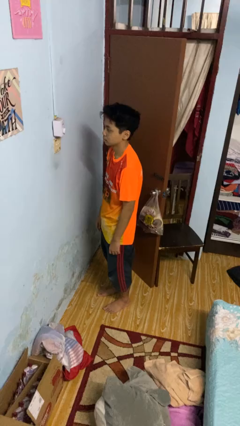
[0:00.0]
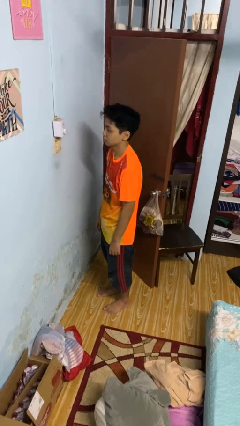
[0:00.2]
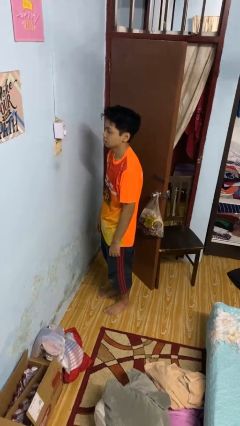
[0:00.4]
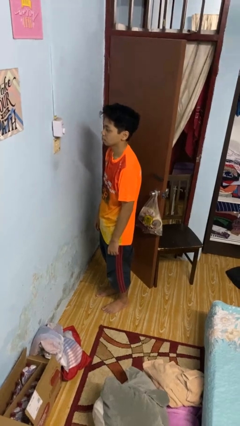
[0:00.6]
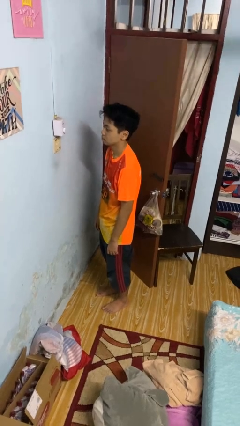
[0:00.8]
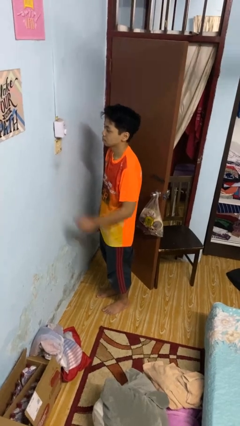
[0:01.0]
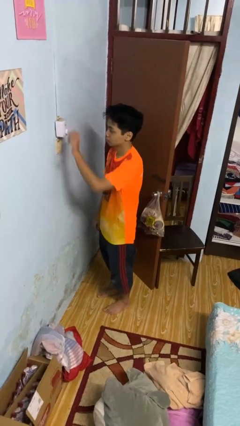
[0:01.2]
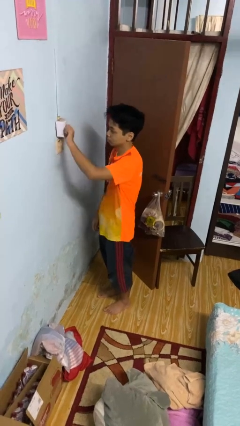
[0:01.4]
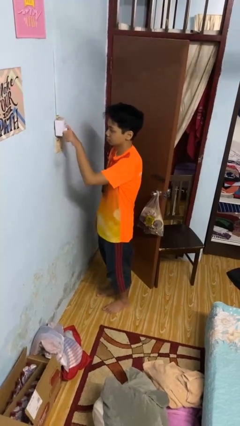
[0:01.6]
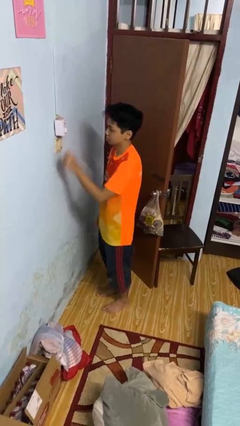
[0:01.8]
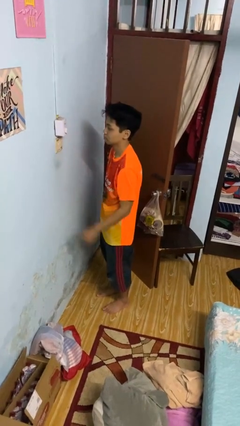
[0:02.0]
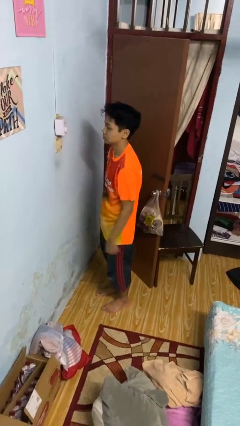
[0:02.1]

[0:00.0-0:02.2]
person adjusts thermostat

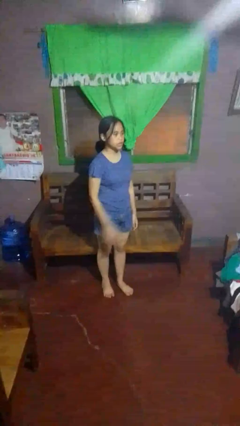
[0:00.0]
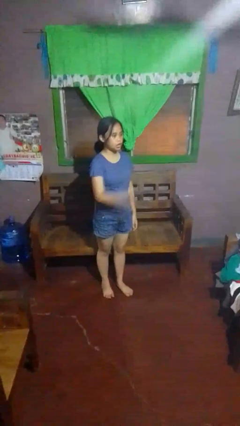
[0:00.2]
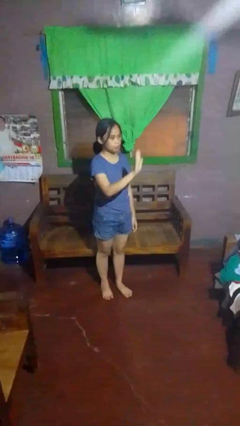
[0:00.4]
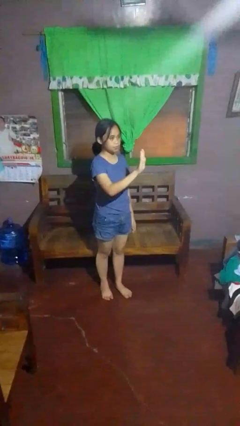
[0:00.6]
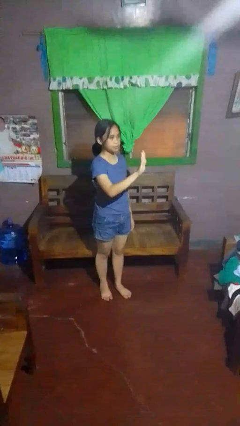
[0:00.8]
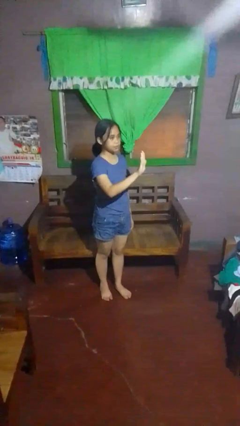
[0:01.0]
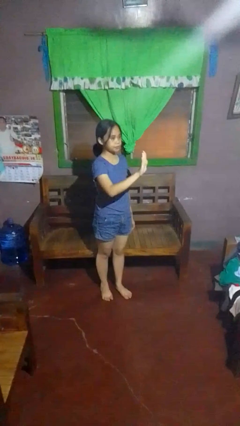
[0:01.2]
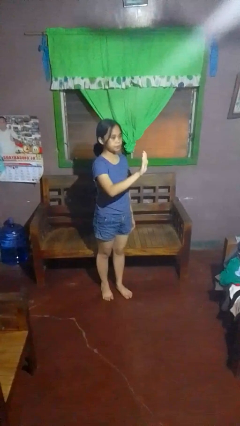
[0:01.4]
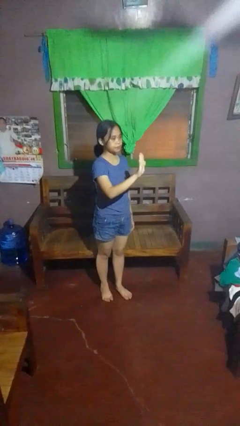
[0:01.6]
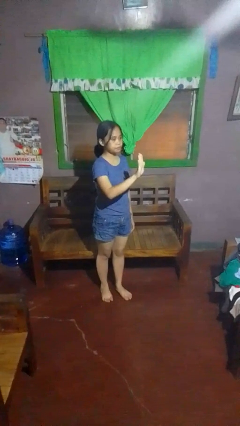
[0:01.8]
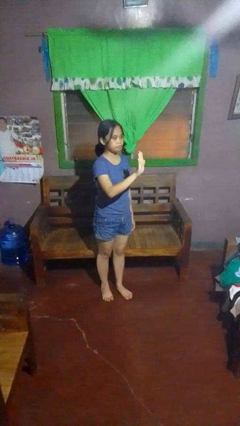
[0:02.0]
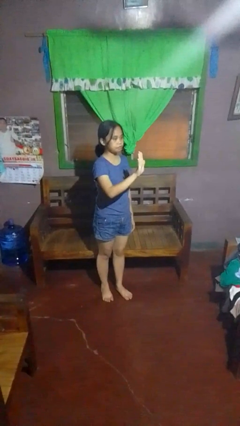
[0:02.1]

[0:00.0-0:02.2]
person gestures stop

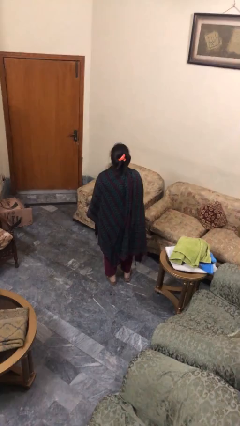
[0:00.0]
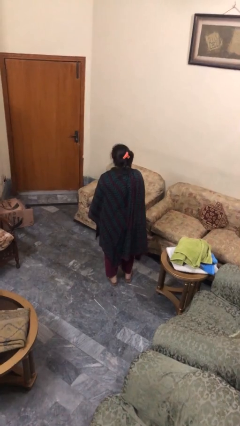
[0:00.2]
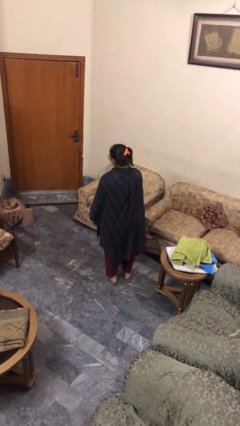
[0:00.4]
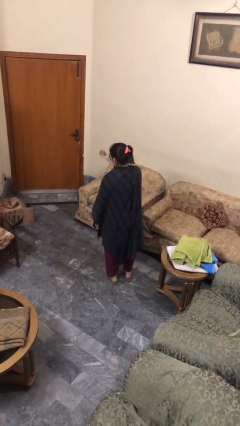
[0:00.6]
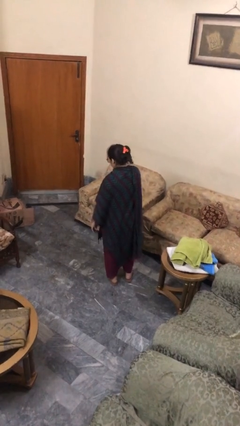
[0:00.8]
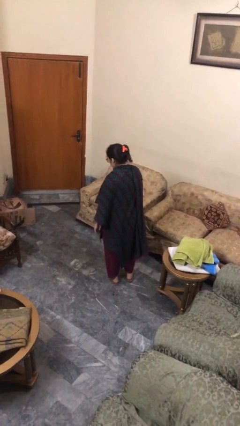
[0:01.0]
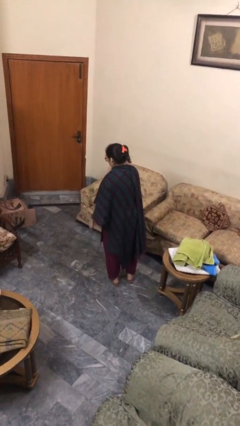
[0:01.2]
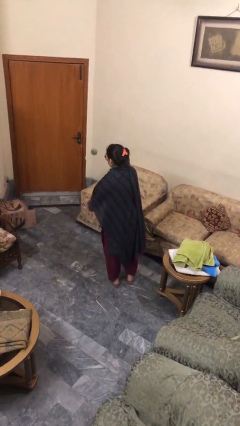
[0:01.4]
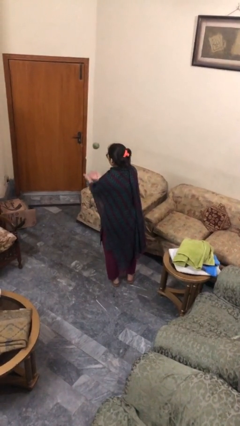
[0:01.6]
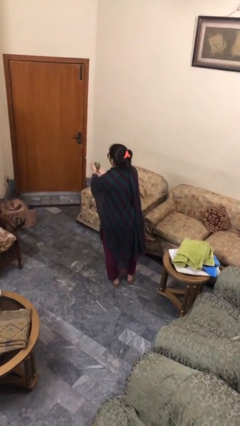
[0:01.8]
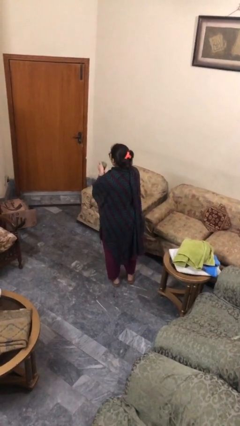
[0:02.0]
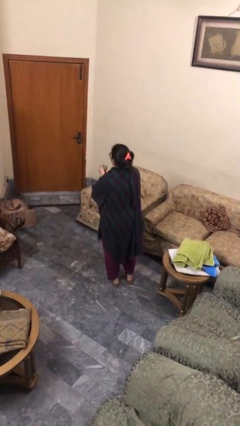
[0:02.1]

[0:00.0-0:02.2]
person bounces ball on floor

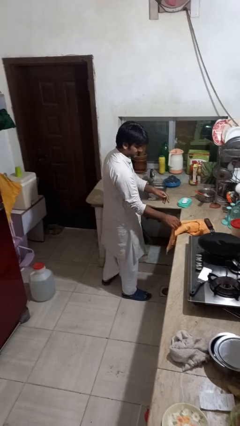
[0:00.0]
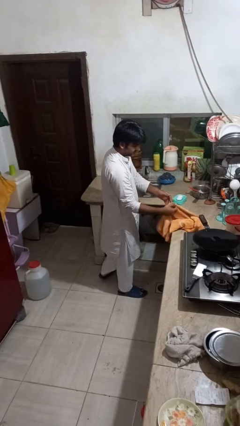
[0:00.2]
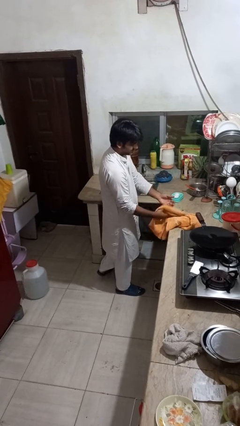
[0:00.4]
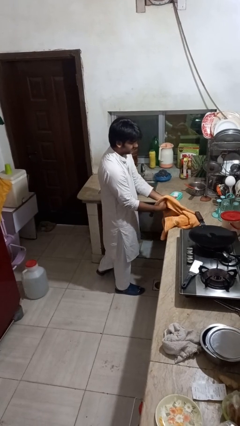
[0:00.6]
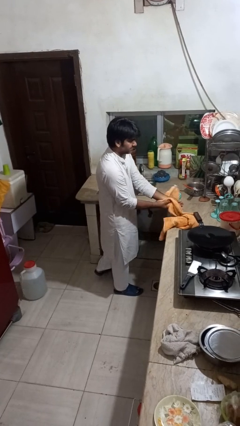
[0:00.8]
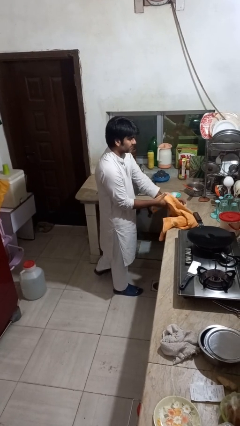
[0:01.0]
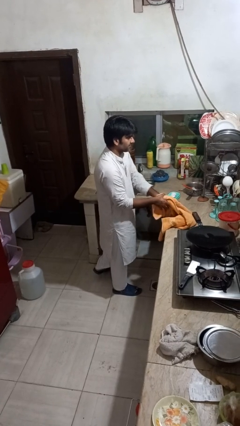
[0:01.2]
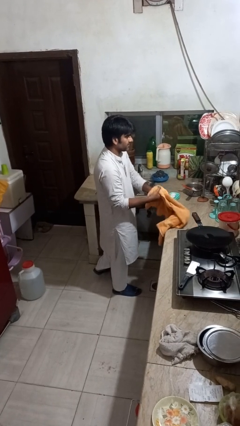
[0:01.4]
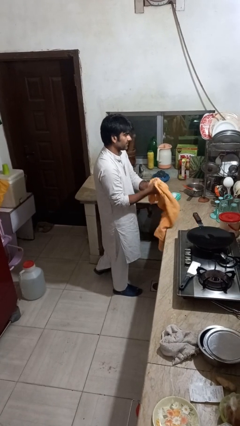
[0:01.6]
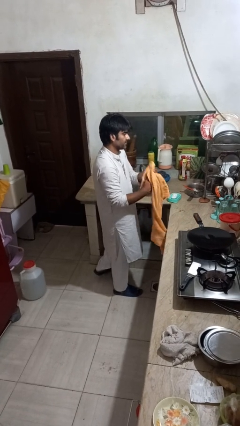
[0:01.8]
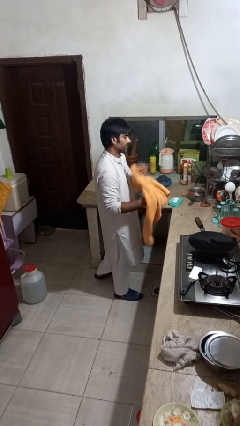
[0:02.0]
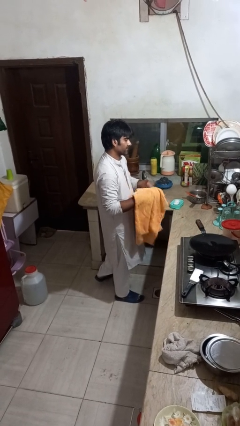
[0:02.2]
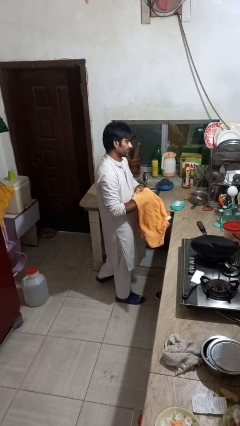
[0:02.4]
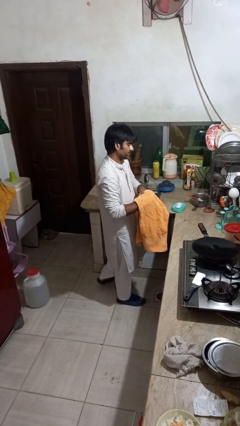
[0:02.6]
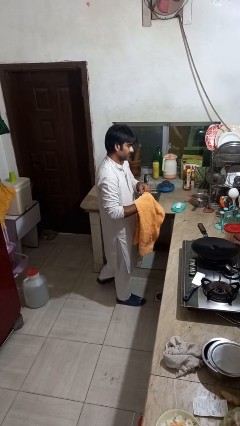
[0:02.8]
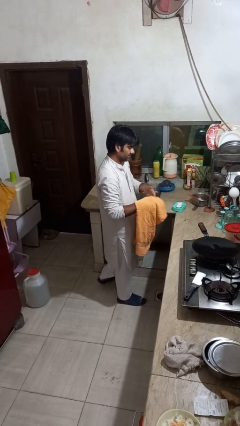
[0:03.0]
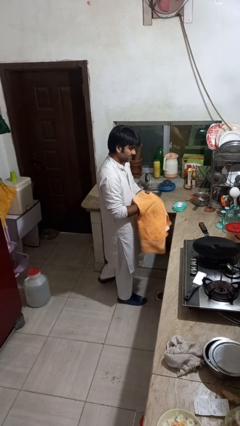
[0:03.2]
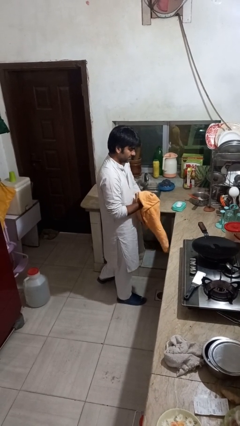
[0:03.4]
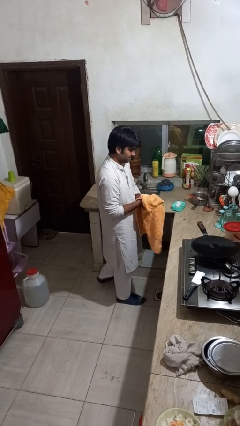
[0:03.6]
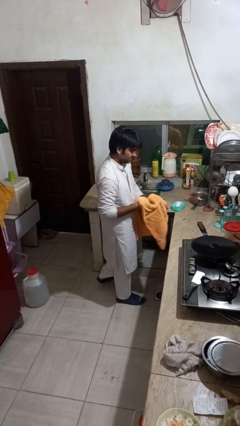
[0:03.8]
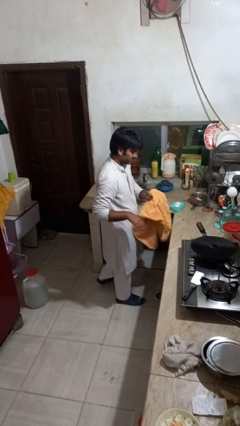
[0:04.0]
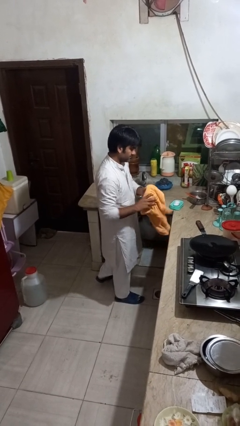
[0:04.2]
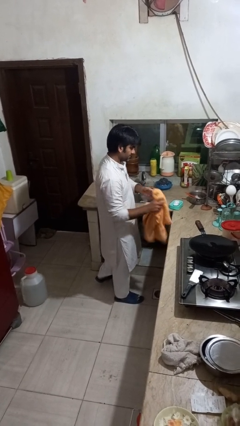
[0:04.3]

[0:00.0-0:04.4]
person dries hands with towel

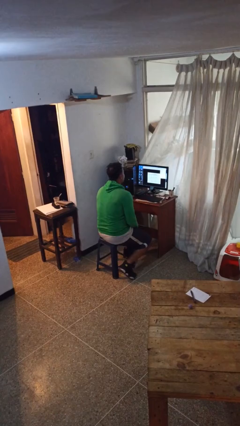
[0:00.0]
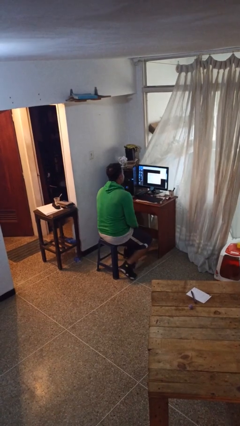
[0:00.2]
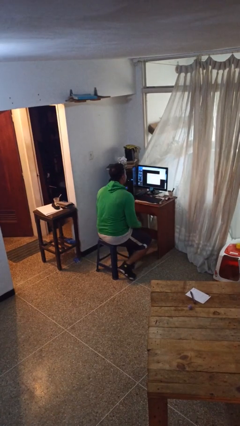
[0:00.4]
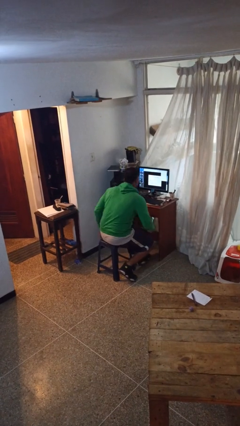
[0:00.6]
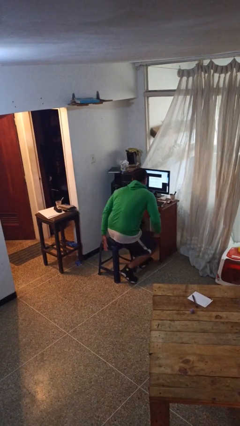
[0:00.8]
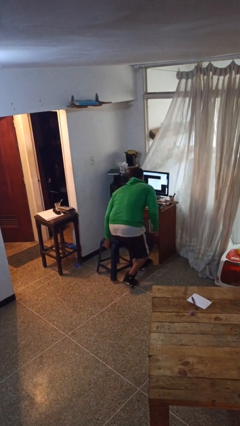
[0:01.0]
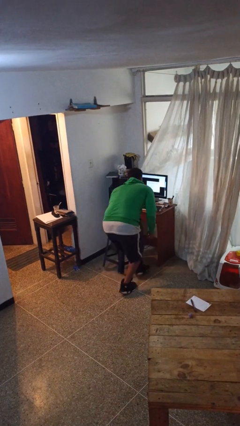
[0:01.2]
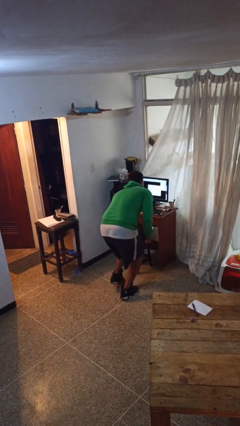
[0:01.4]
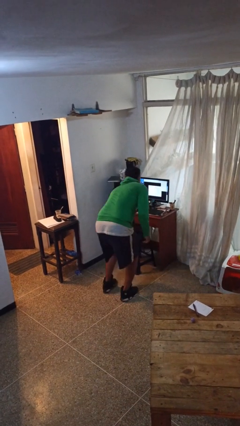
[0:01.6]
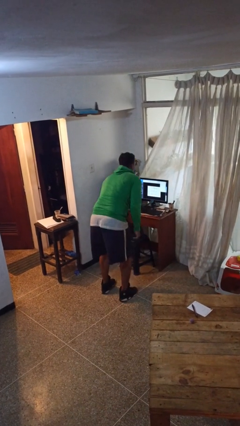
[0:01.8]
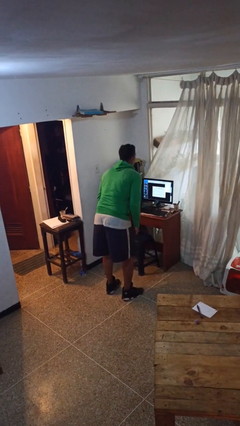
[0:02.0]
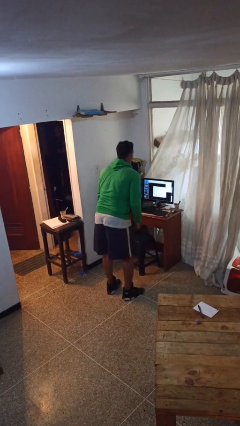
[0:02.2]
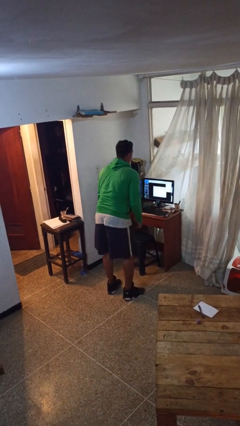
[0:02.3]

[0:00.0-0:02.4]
person stands up

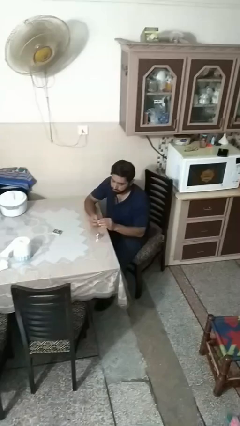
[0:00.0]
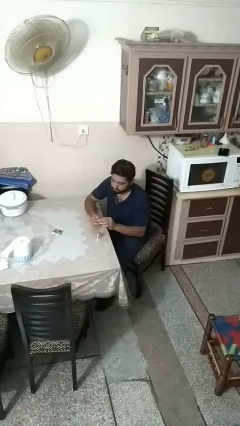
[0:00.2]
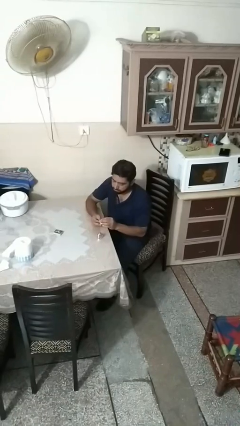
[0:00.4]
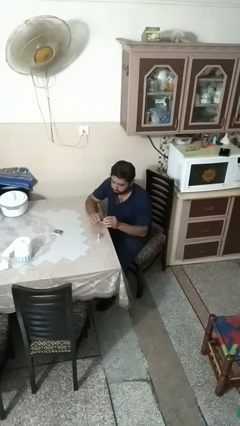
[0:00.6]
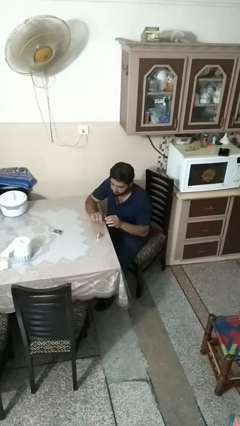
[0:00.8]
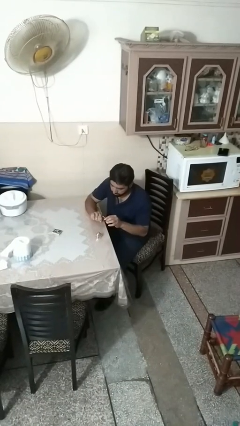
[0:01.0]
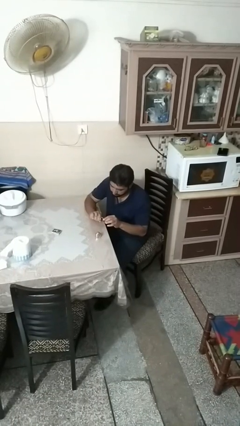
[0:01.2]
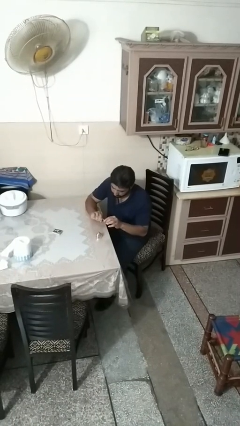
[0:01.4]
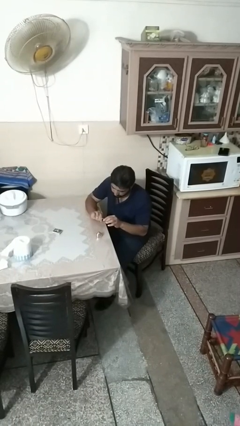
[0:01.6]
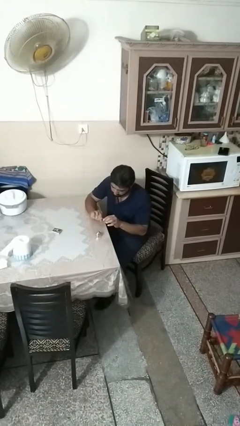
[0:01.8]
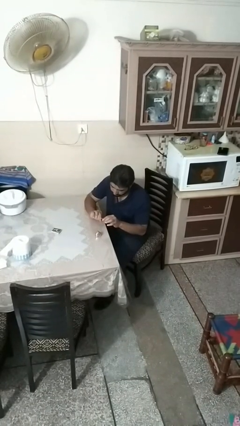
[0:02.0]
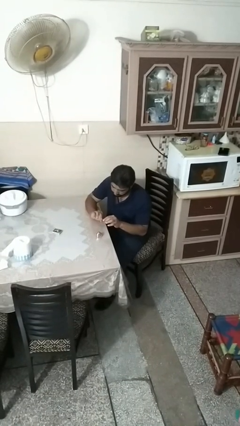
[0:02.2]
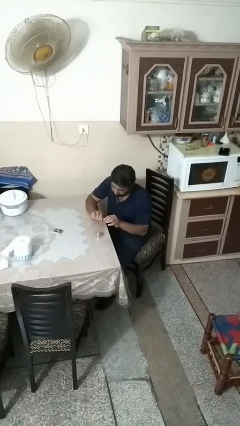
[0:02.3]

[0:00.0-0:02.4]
person paints fingernails

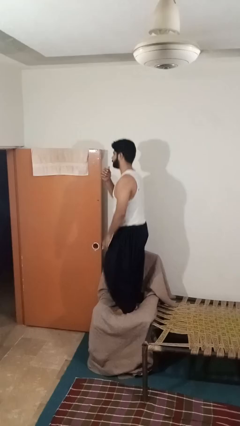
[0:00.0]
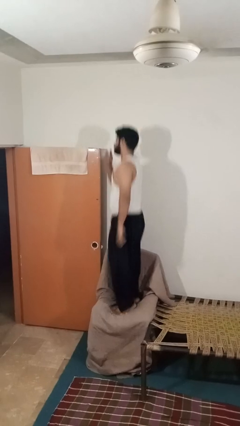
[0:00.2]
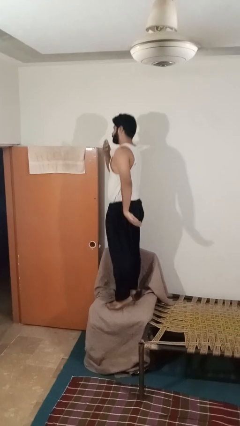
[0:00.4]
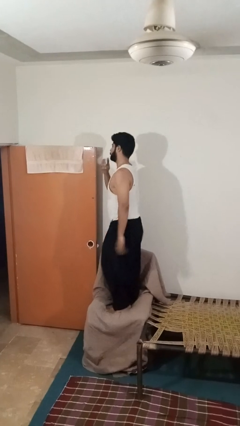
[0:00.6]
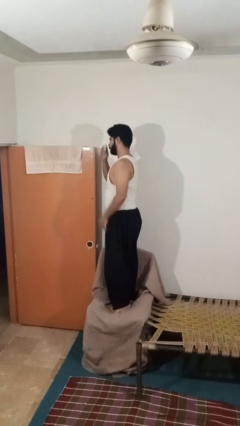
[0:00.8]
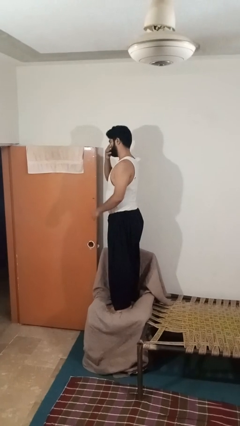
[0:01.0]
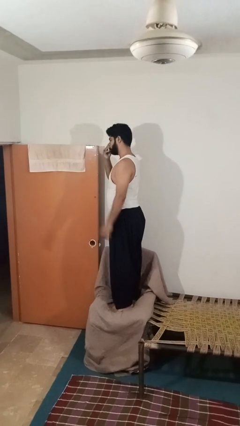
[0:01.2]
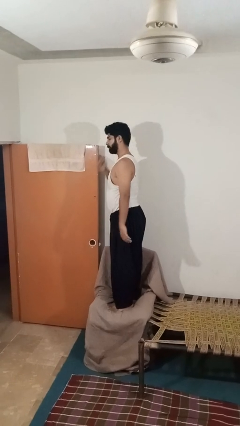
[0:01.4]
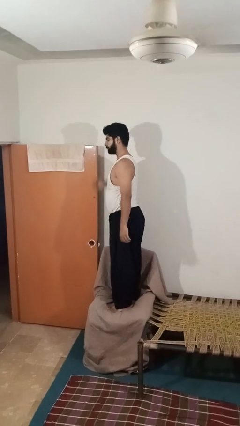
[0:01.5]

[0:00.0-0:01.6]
person jumps on couch
